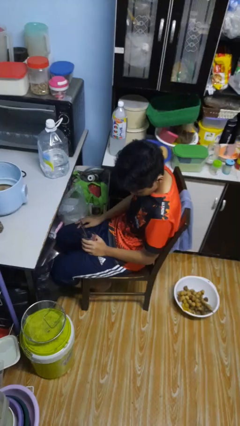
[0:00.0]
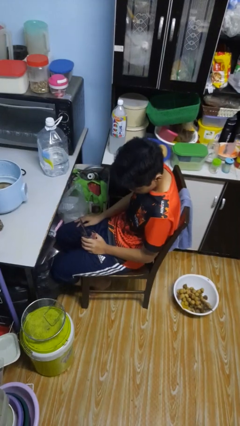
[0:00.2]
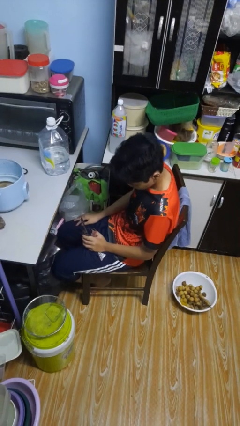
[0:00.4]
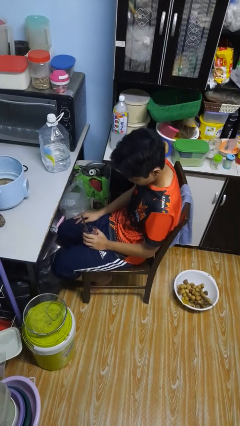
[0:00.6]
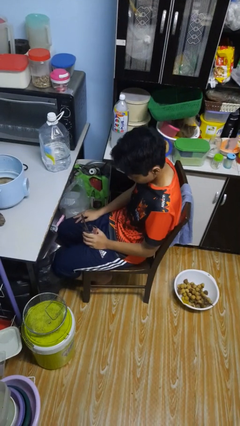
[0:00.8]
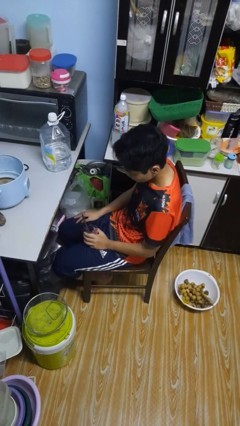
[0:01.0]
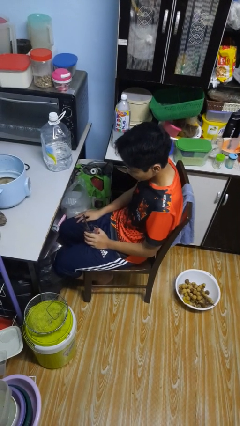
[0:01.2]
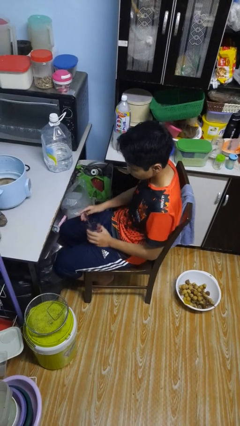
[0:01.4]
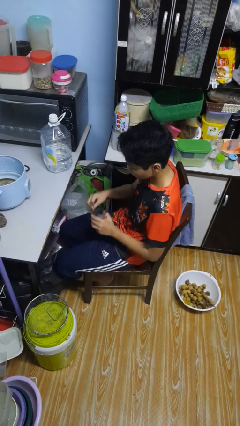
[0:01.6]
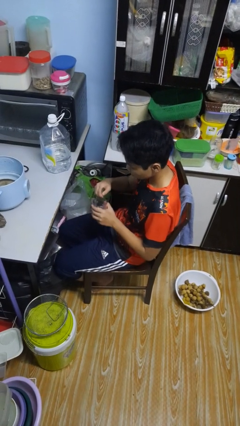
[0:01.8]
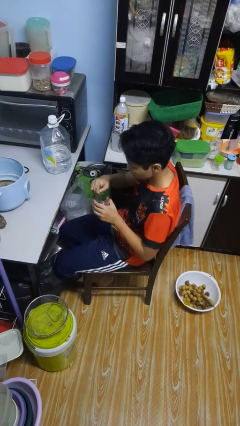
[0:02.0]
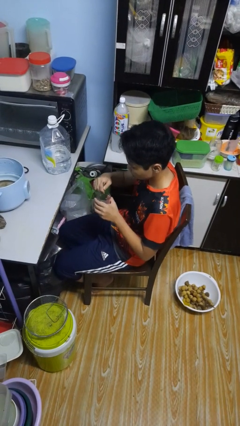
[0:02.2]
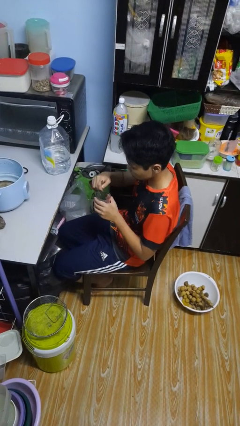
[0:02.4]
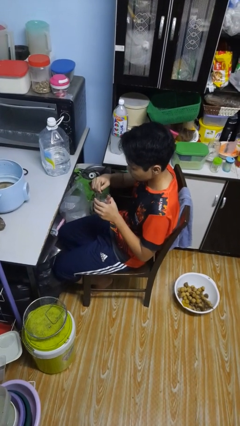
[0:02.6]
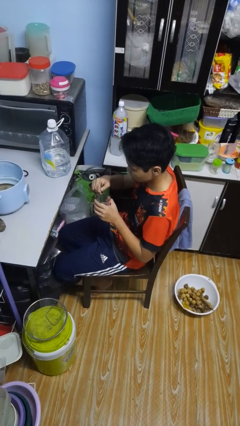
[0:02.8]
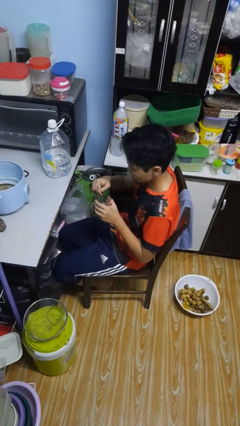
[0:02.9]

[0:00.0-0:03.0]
person stirs mug

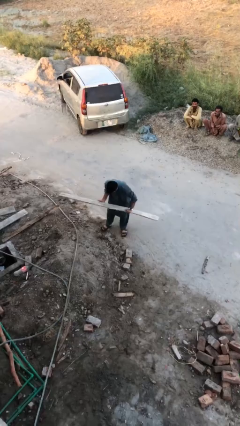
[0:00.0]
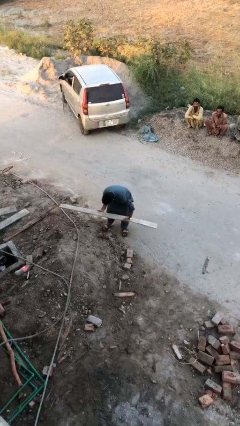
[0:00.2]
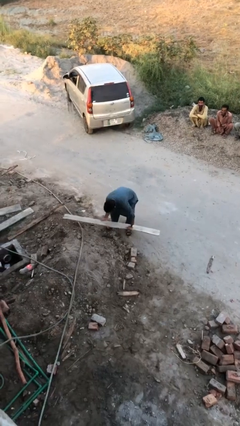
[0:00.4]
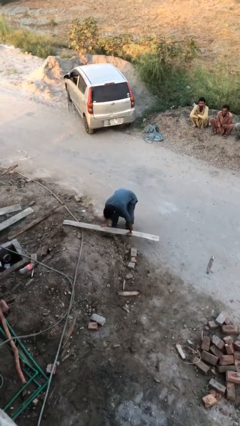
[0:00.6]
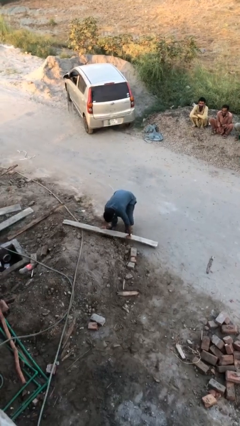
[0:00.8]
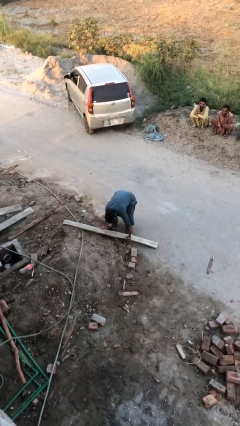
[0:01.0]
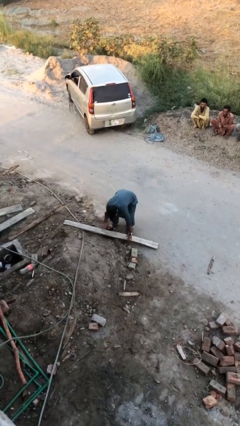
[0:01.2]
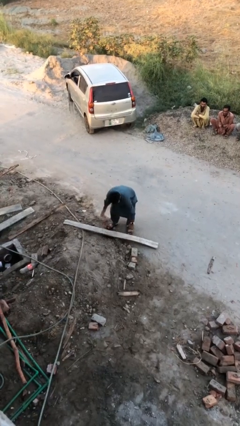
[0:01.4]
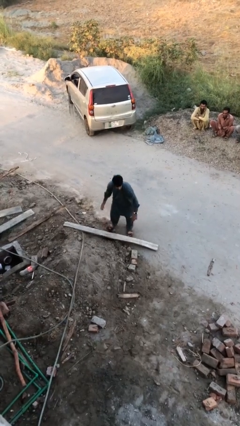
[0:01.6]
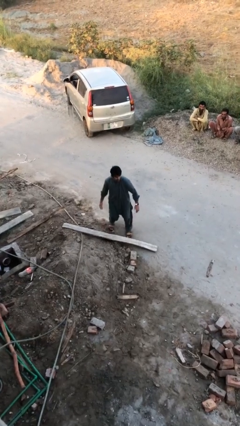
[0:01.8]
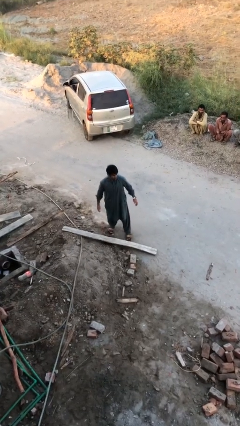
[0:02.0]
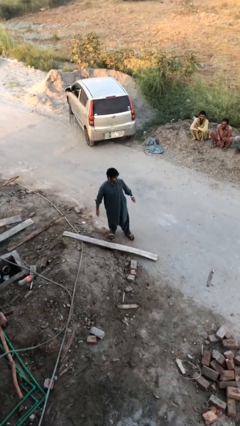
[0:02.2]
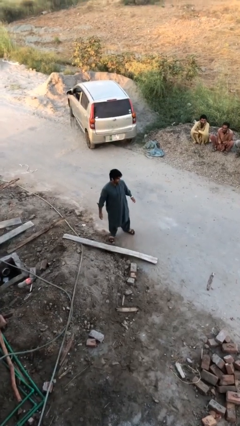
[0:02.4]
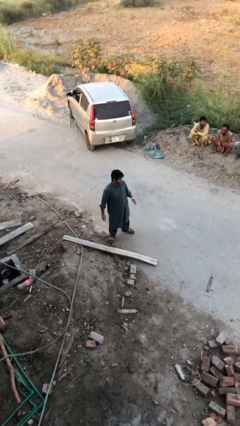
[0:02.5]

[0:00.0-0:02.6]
person puts down object on floor

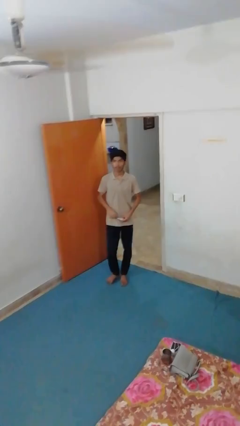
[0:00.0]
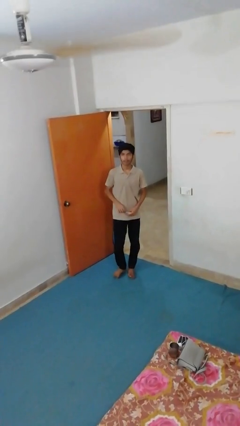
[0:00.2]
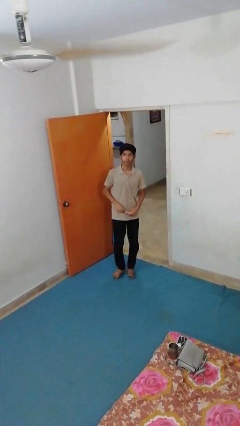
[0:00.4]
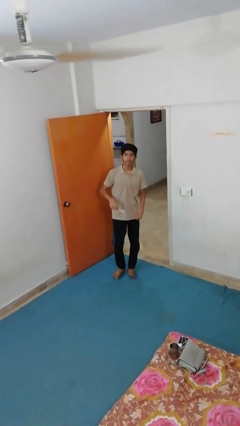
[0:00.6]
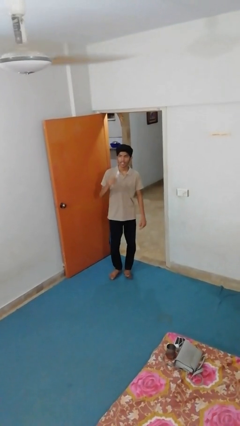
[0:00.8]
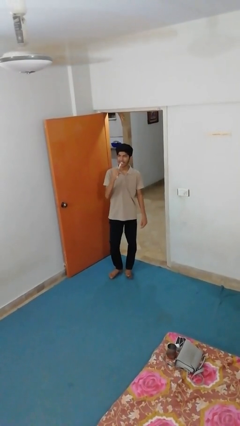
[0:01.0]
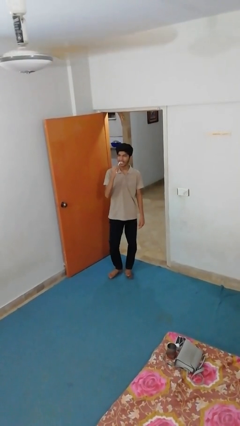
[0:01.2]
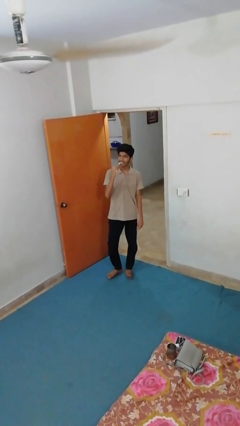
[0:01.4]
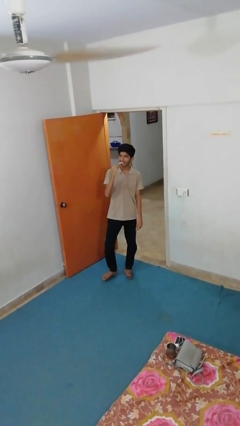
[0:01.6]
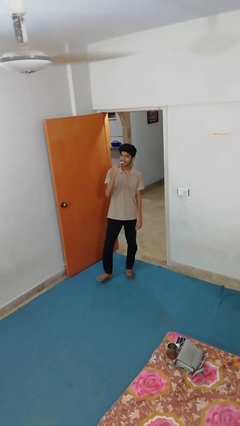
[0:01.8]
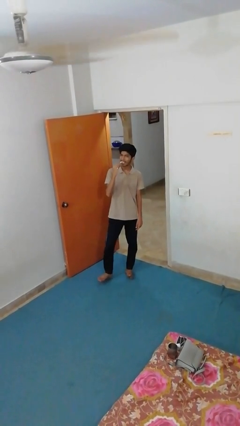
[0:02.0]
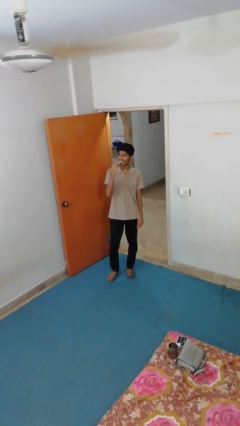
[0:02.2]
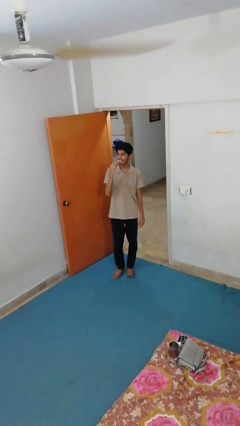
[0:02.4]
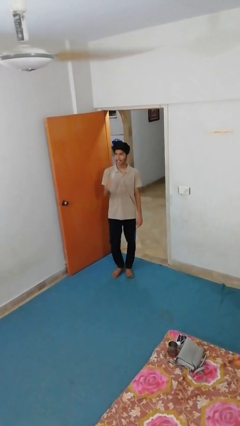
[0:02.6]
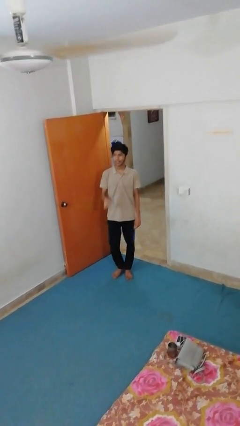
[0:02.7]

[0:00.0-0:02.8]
person brushes teeth

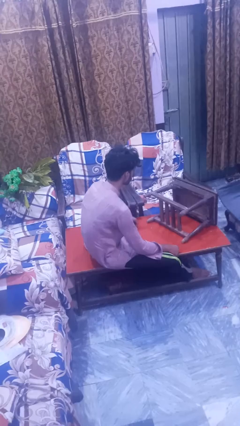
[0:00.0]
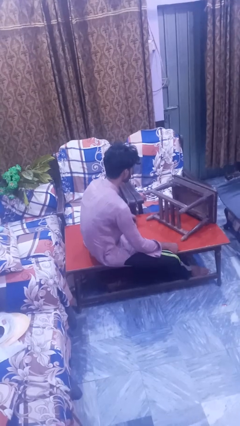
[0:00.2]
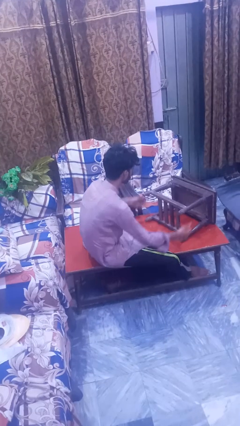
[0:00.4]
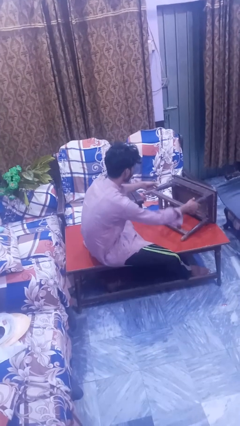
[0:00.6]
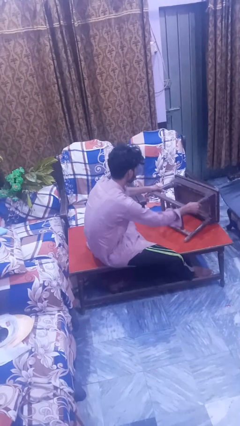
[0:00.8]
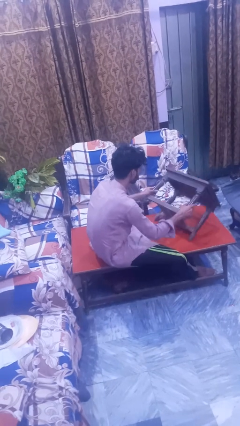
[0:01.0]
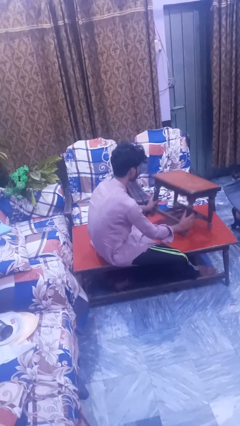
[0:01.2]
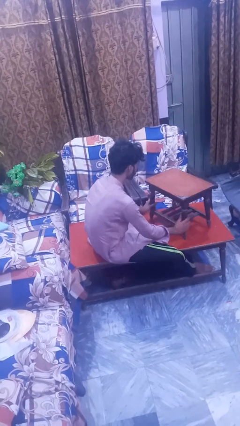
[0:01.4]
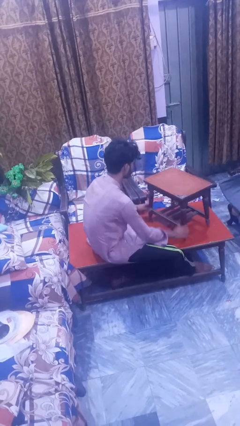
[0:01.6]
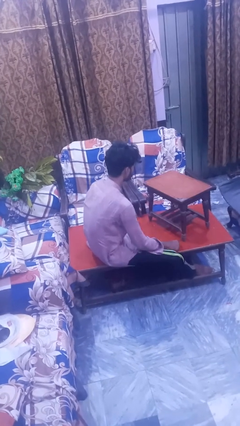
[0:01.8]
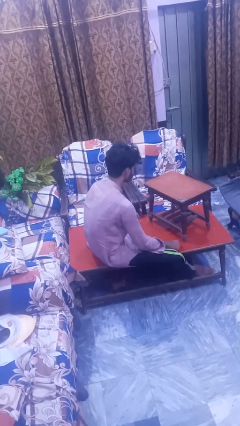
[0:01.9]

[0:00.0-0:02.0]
person sets upright furniture

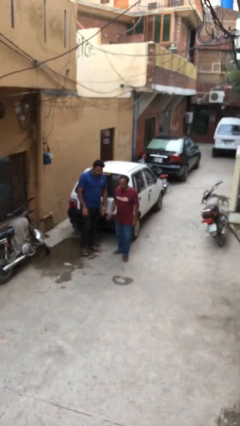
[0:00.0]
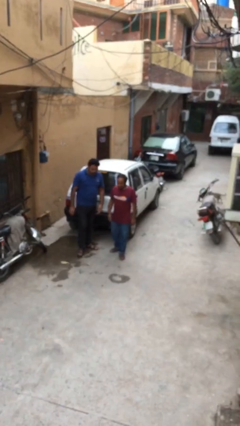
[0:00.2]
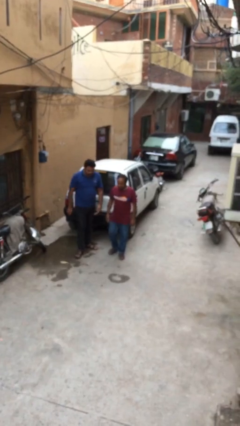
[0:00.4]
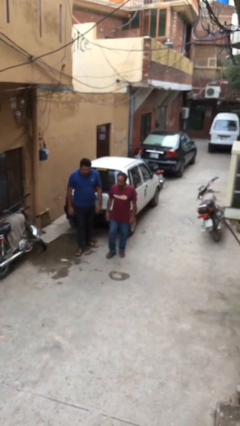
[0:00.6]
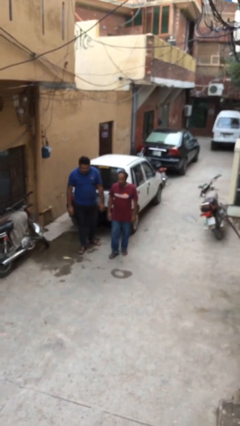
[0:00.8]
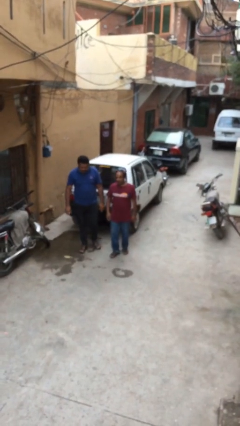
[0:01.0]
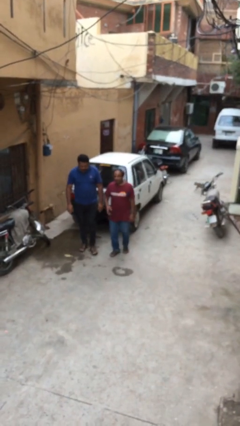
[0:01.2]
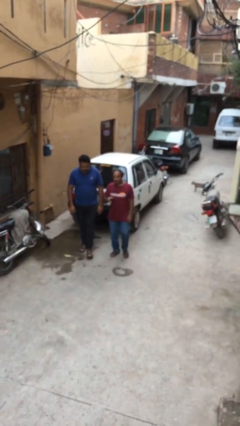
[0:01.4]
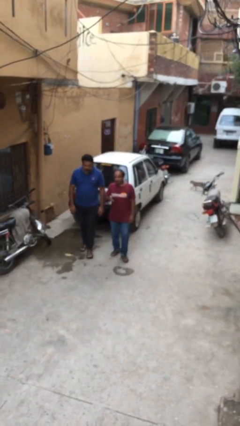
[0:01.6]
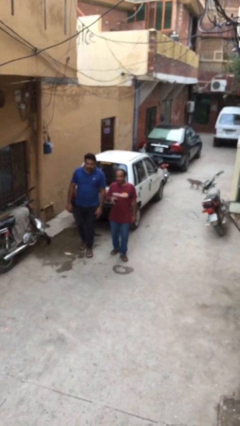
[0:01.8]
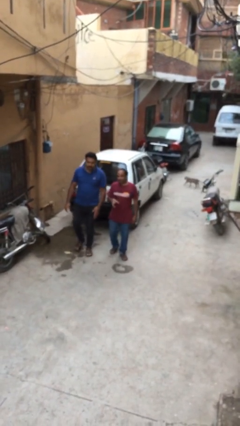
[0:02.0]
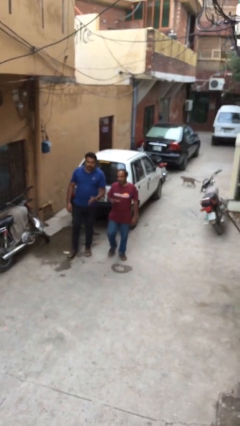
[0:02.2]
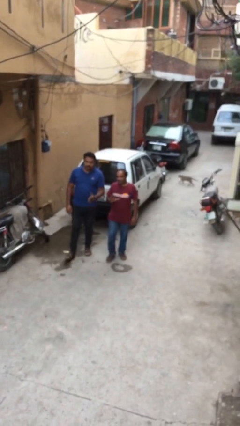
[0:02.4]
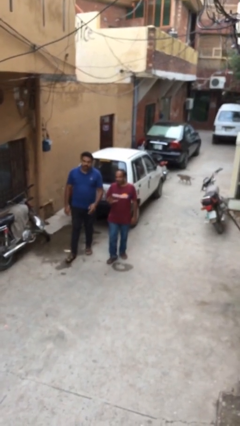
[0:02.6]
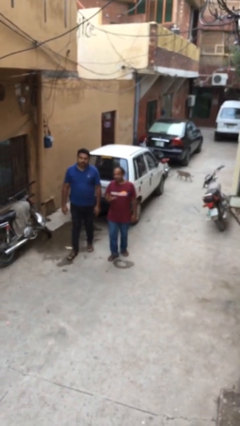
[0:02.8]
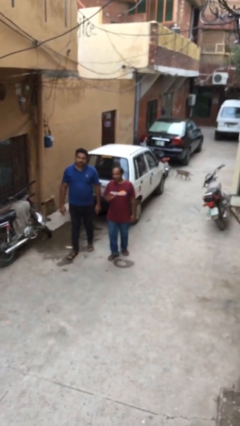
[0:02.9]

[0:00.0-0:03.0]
person talks to person

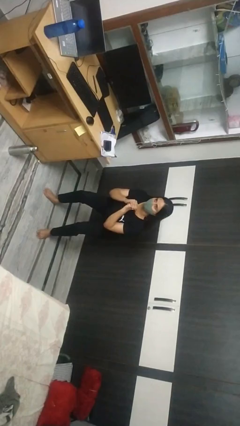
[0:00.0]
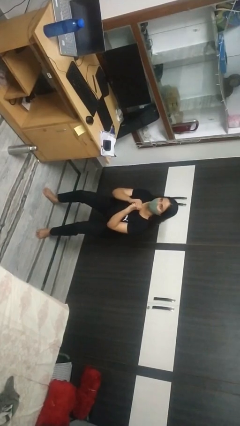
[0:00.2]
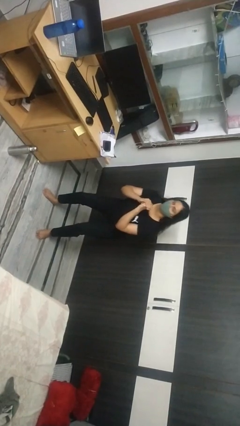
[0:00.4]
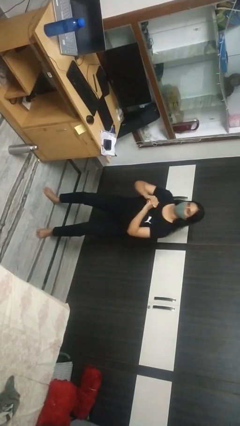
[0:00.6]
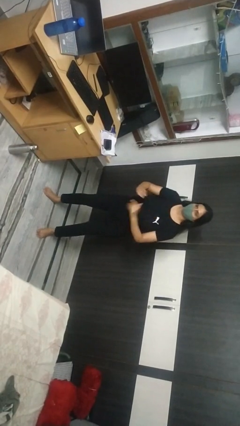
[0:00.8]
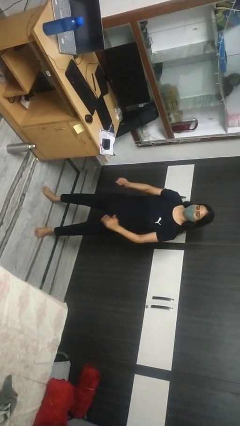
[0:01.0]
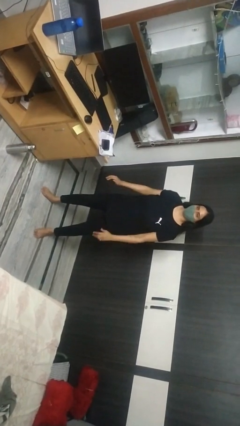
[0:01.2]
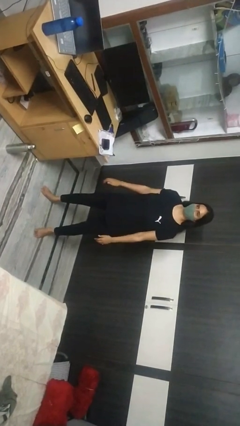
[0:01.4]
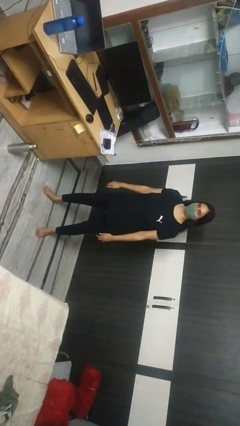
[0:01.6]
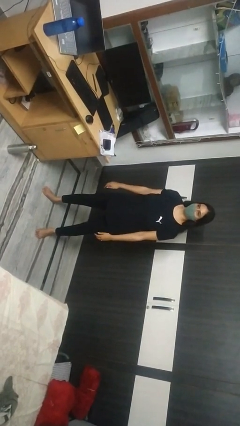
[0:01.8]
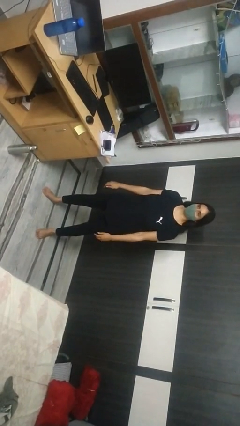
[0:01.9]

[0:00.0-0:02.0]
person stands up

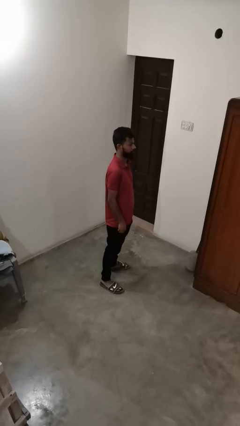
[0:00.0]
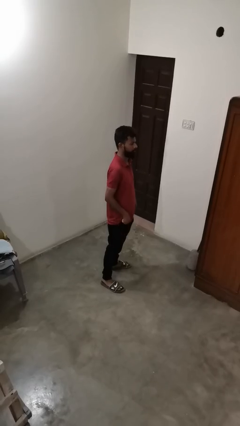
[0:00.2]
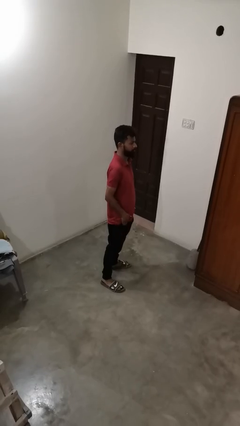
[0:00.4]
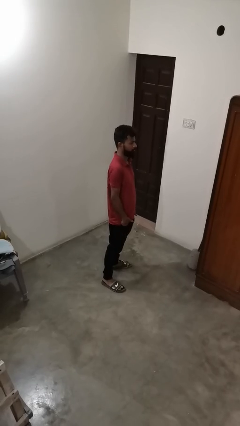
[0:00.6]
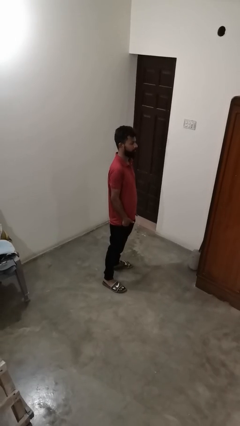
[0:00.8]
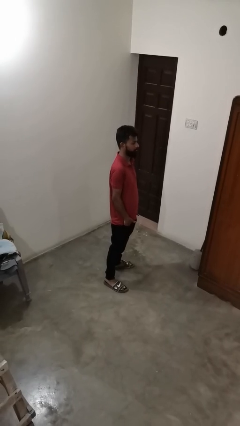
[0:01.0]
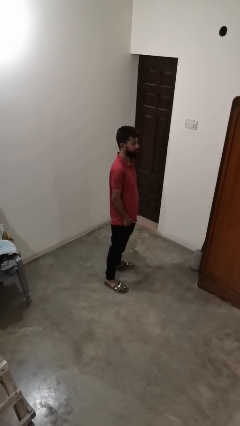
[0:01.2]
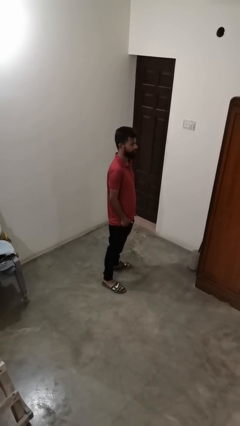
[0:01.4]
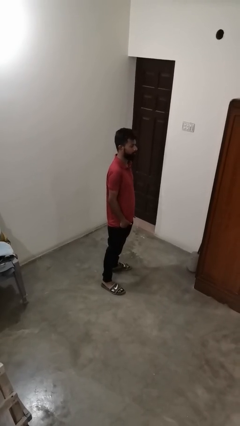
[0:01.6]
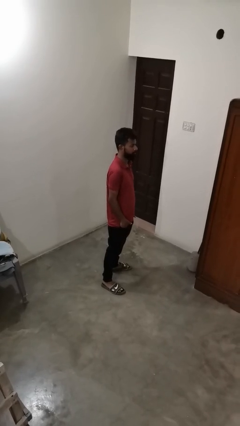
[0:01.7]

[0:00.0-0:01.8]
person puts hands in back pockets
